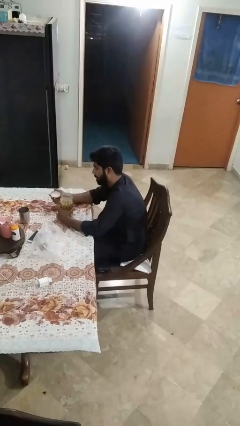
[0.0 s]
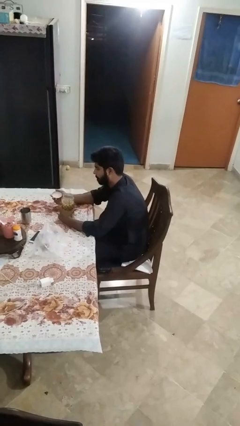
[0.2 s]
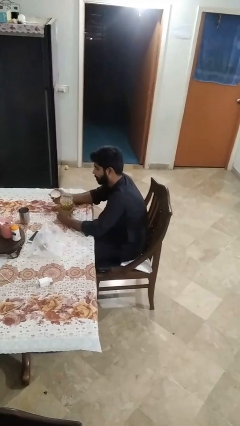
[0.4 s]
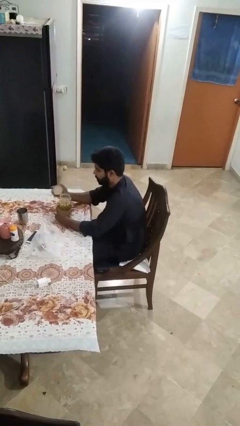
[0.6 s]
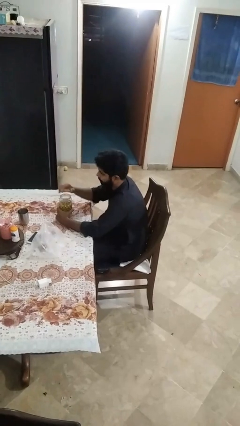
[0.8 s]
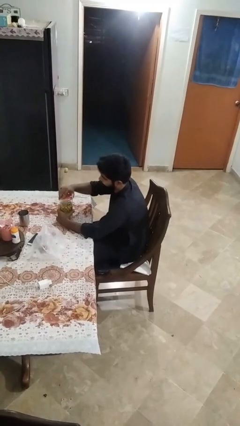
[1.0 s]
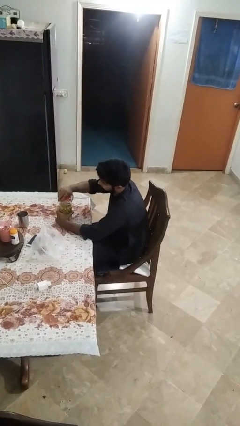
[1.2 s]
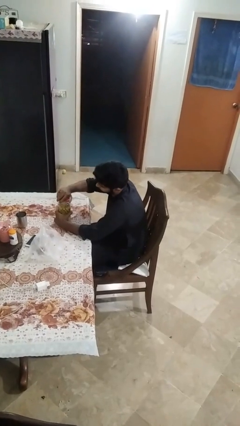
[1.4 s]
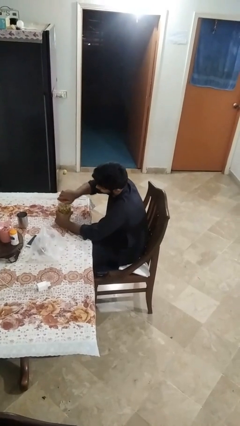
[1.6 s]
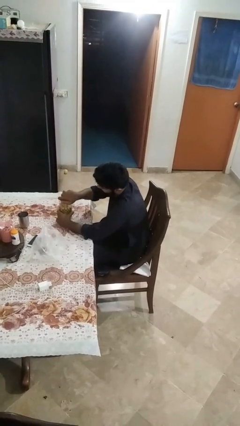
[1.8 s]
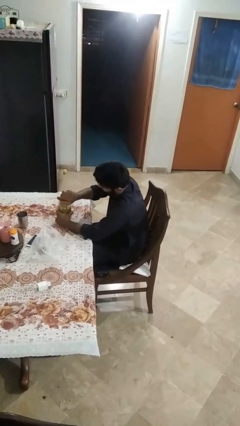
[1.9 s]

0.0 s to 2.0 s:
person closes jar

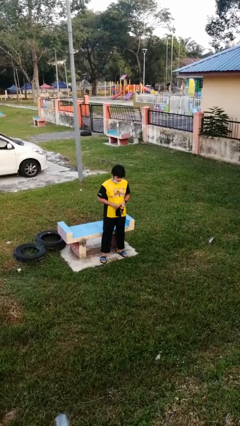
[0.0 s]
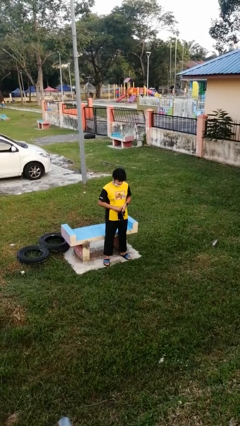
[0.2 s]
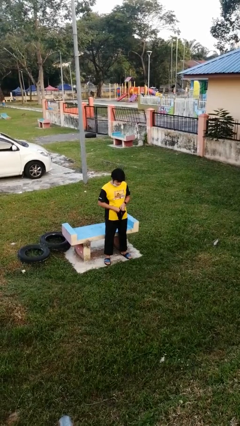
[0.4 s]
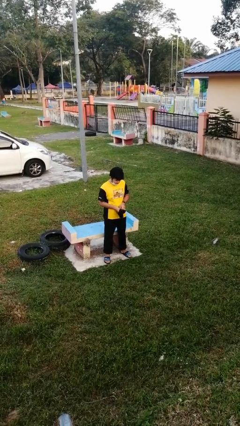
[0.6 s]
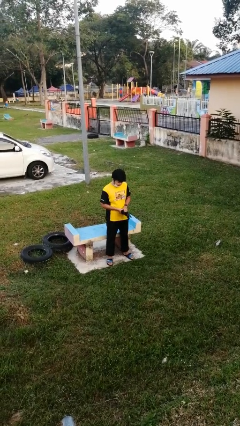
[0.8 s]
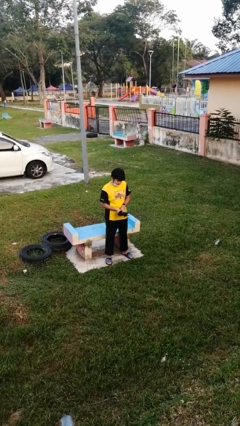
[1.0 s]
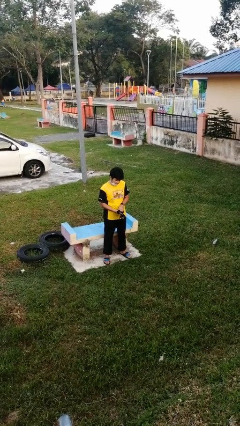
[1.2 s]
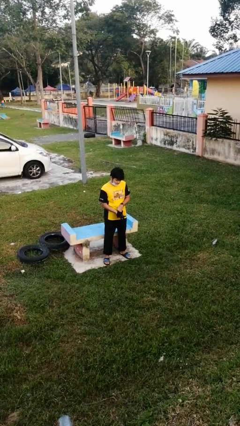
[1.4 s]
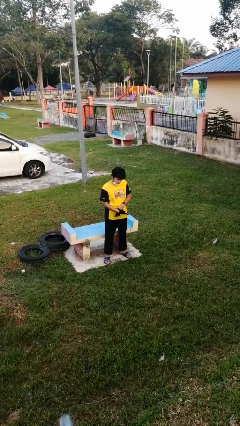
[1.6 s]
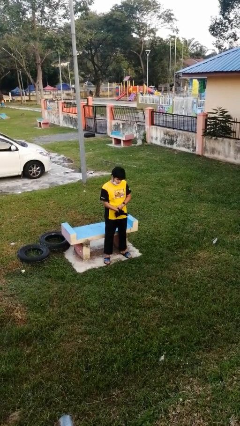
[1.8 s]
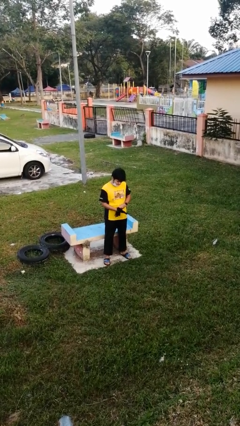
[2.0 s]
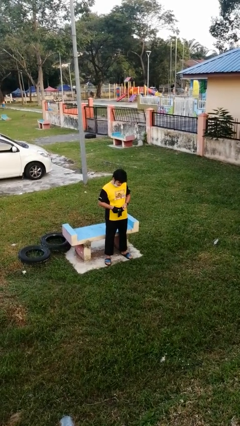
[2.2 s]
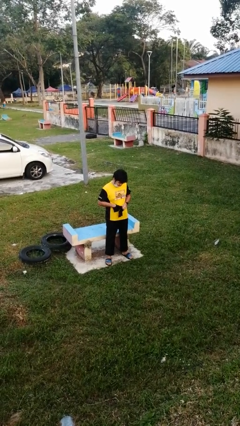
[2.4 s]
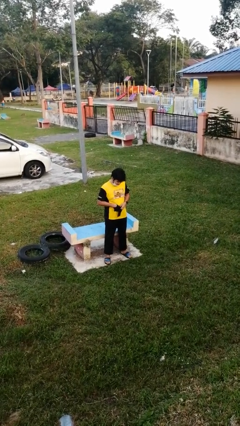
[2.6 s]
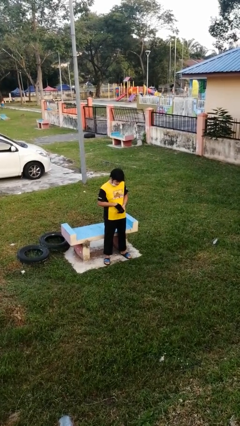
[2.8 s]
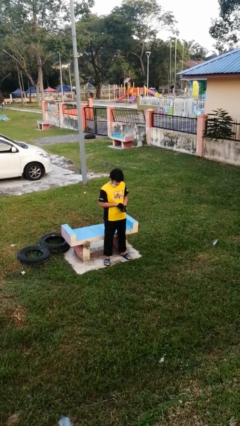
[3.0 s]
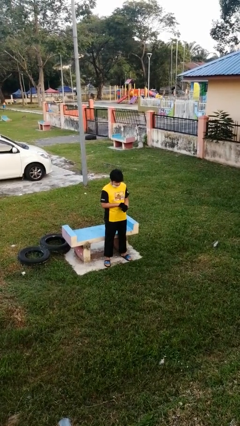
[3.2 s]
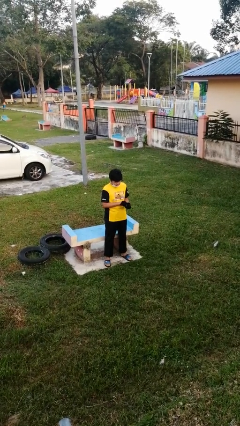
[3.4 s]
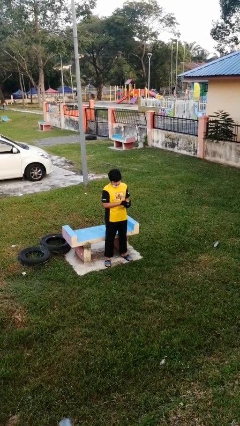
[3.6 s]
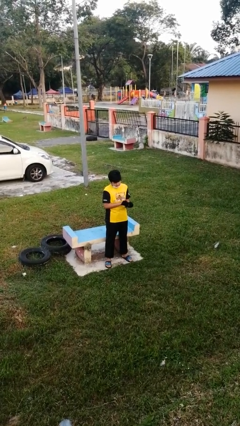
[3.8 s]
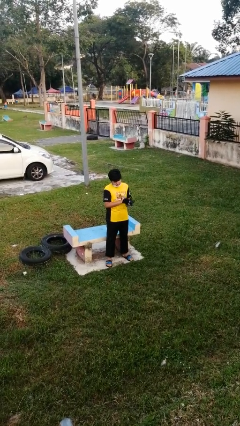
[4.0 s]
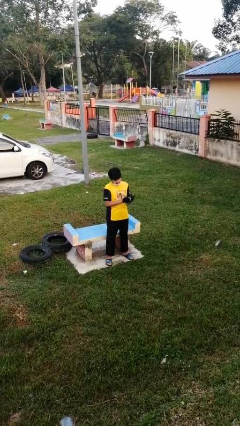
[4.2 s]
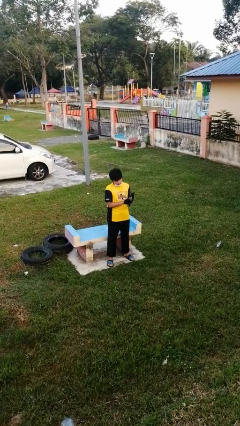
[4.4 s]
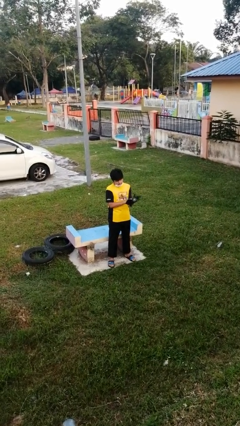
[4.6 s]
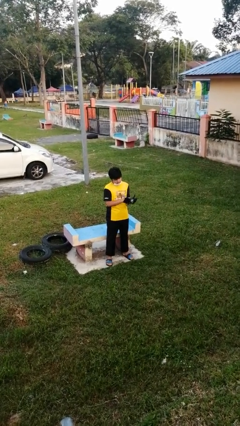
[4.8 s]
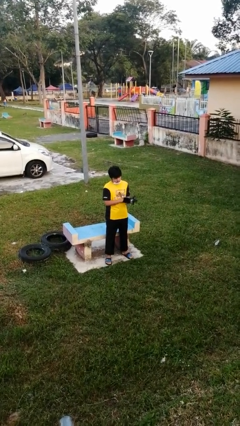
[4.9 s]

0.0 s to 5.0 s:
person puts on gloves

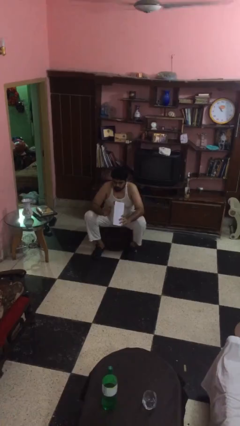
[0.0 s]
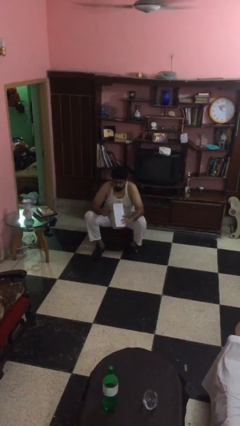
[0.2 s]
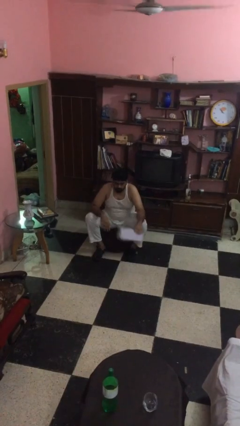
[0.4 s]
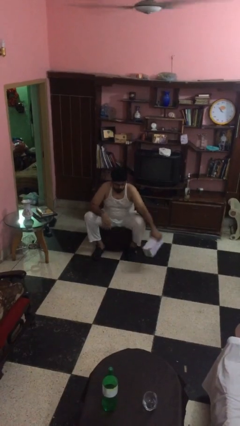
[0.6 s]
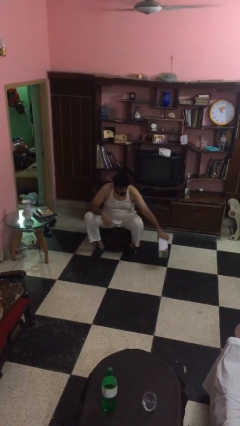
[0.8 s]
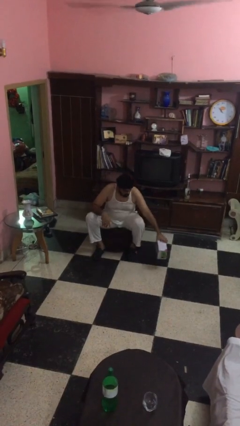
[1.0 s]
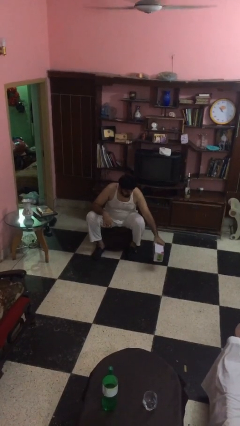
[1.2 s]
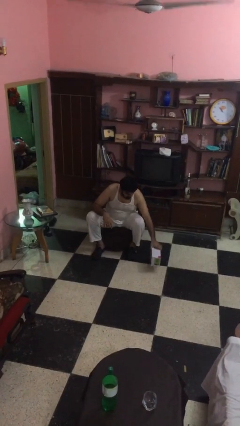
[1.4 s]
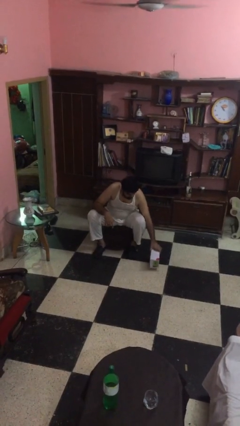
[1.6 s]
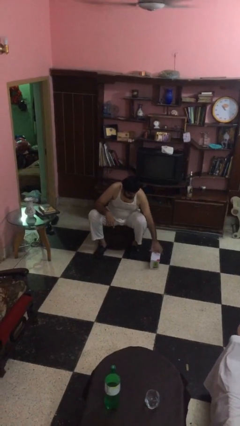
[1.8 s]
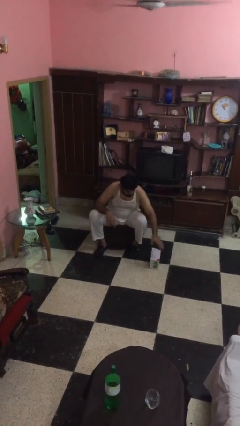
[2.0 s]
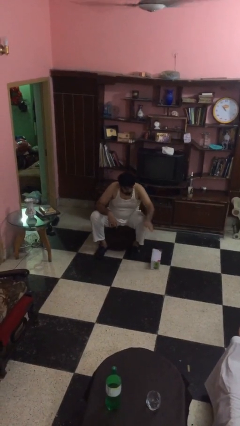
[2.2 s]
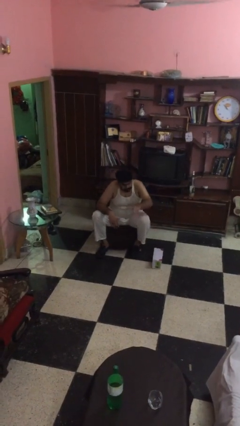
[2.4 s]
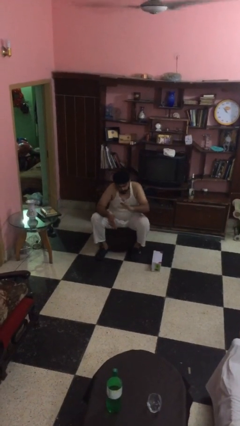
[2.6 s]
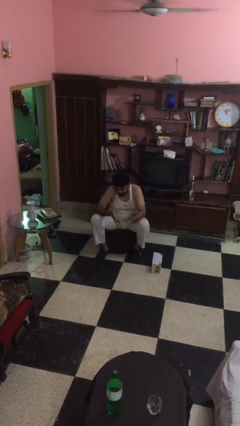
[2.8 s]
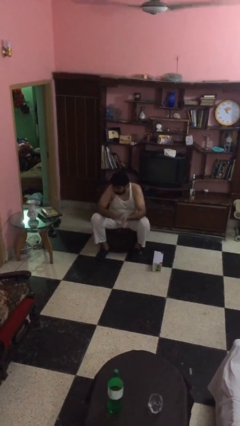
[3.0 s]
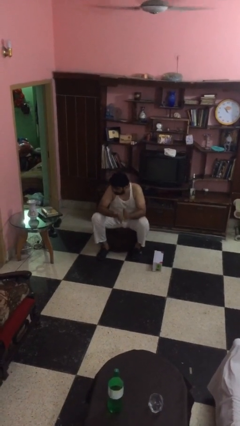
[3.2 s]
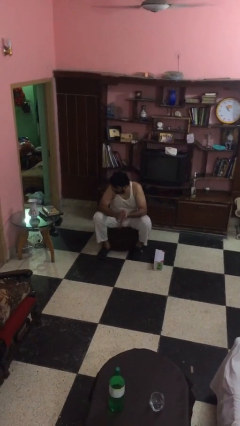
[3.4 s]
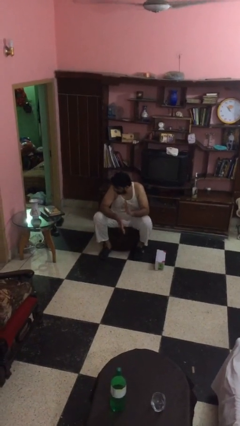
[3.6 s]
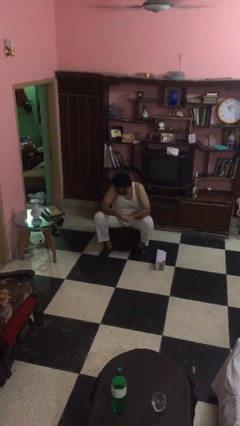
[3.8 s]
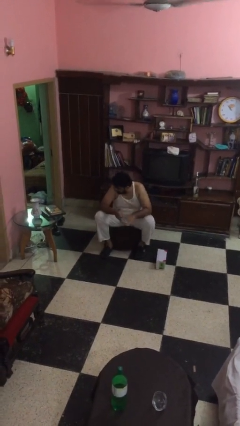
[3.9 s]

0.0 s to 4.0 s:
person puts down object on floor

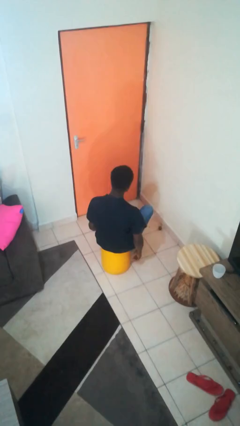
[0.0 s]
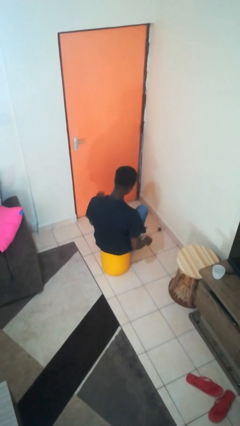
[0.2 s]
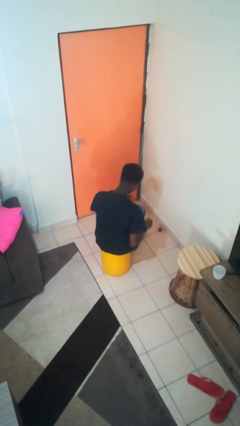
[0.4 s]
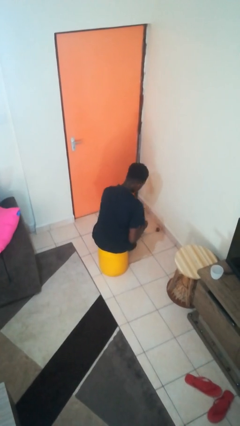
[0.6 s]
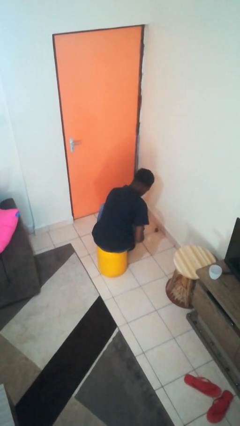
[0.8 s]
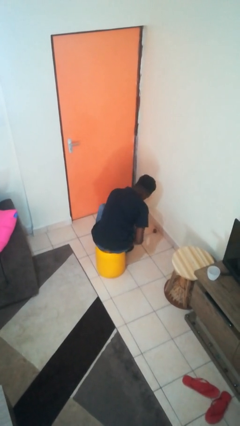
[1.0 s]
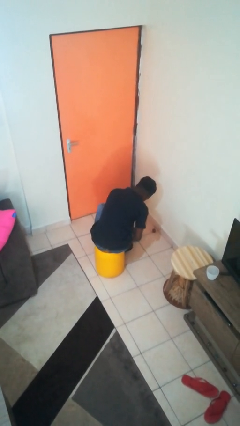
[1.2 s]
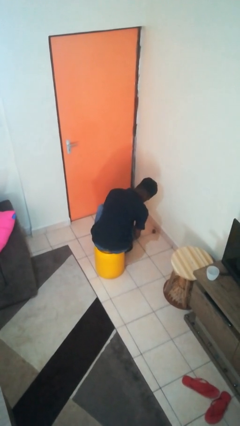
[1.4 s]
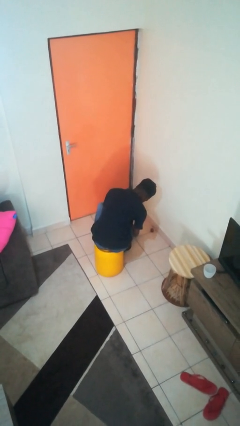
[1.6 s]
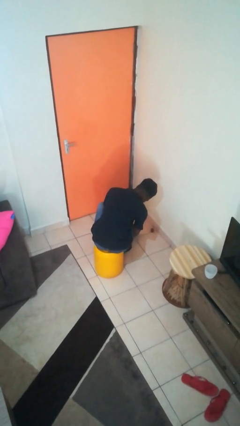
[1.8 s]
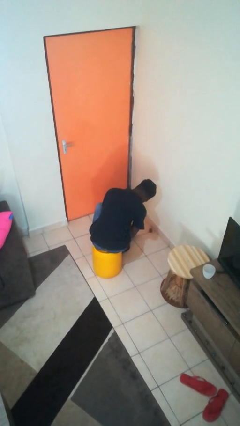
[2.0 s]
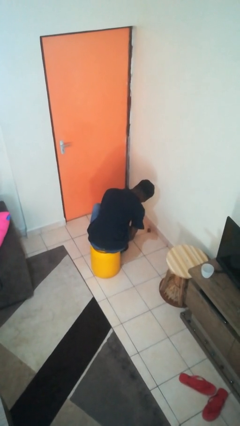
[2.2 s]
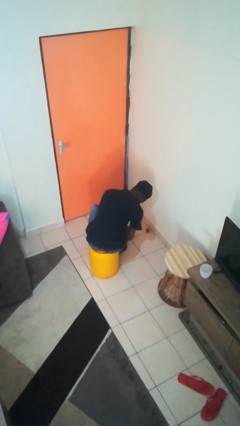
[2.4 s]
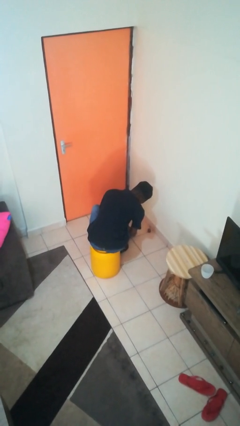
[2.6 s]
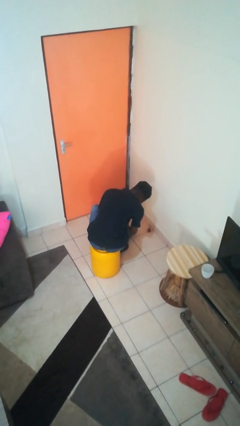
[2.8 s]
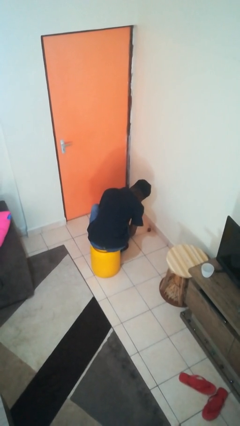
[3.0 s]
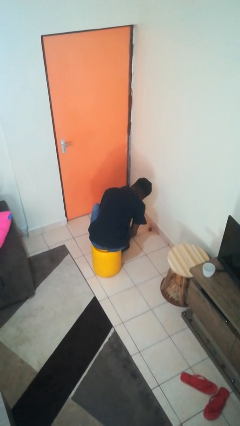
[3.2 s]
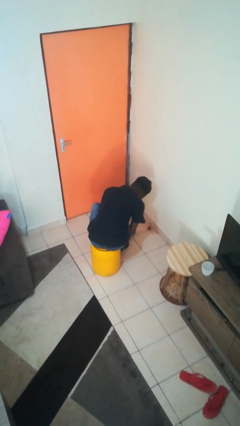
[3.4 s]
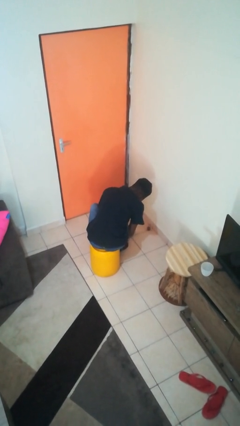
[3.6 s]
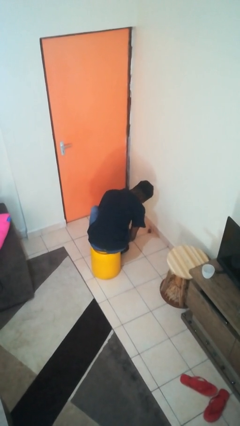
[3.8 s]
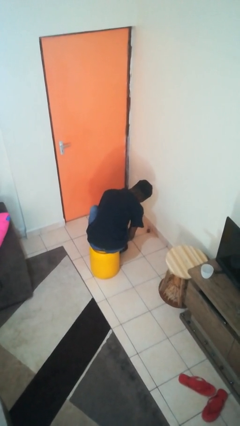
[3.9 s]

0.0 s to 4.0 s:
person rubs foot

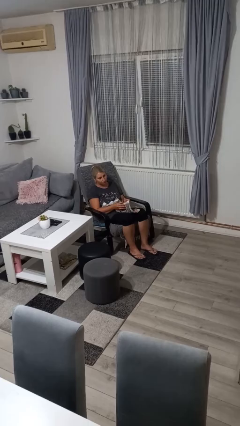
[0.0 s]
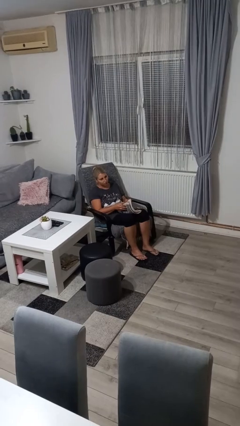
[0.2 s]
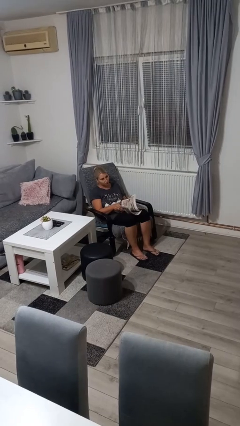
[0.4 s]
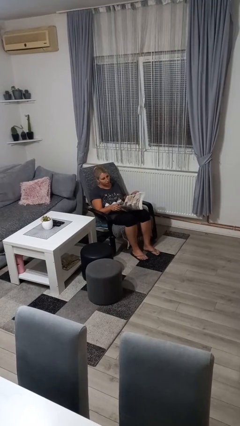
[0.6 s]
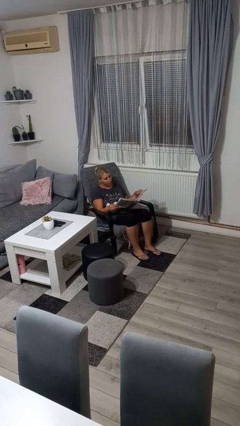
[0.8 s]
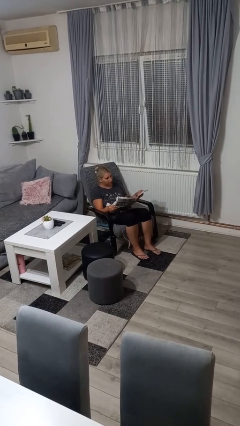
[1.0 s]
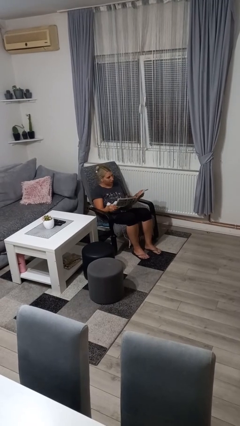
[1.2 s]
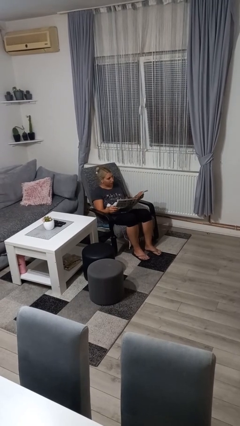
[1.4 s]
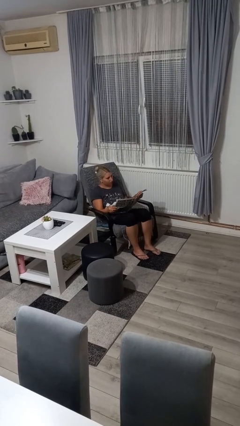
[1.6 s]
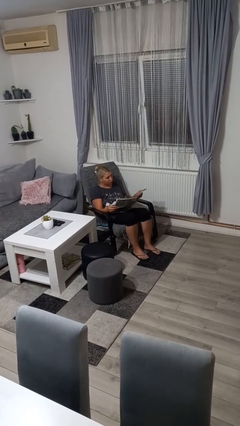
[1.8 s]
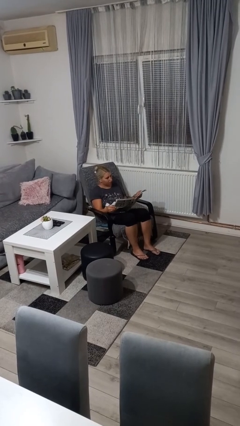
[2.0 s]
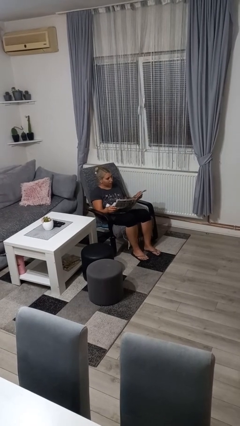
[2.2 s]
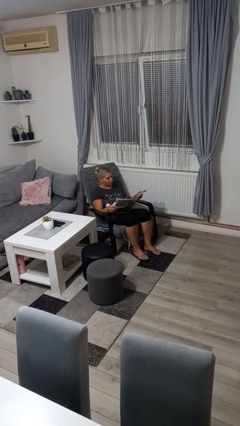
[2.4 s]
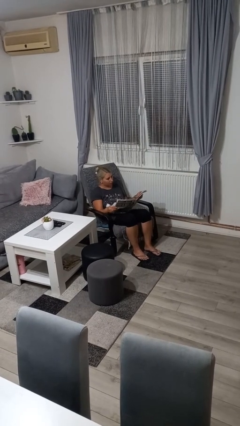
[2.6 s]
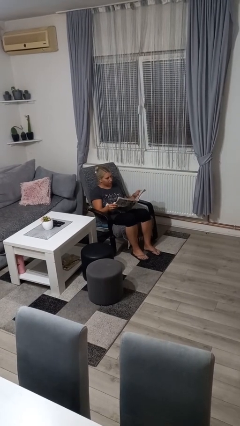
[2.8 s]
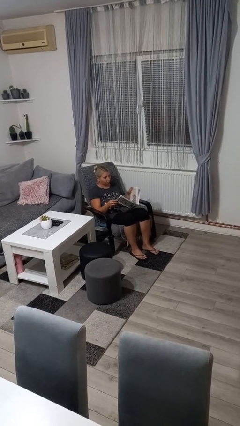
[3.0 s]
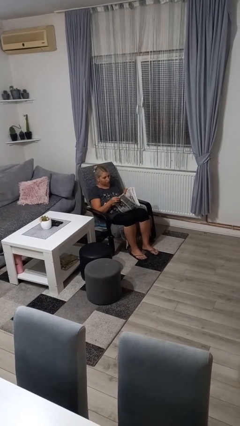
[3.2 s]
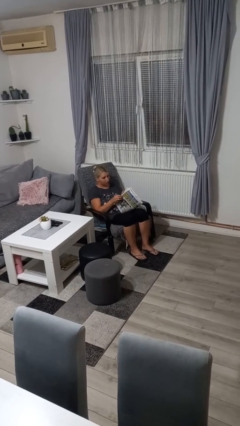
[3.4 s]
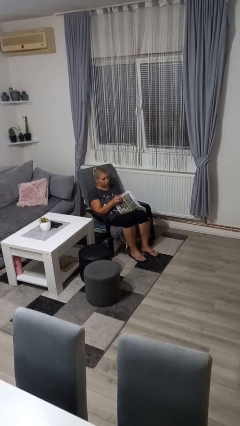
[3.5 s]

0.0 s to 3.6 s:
person reads newspaper
